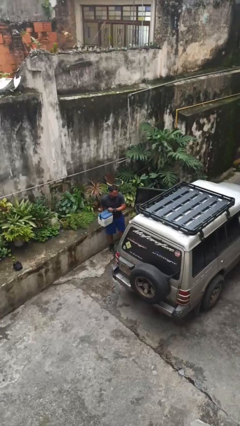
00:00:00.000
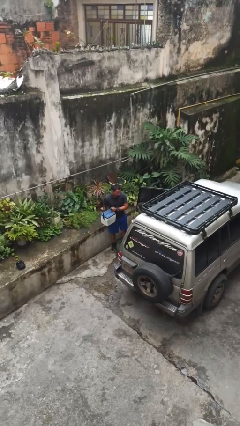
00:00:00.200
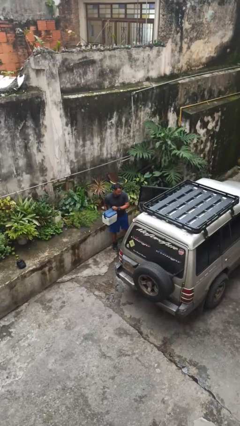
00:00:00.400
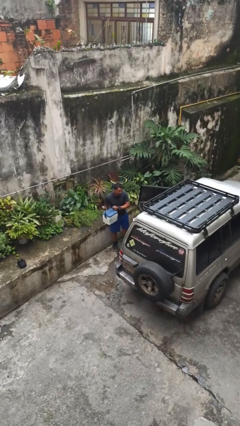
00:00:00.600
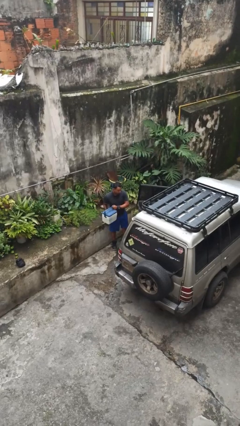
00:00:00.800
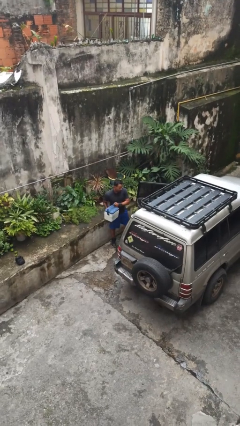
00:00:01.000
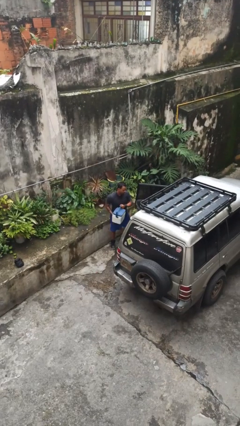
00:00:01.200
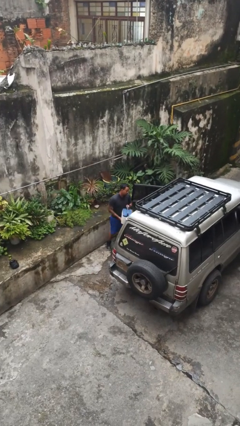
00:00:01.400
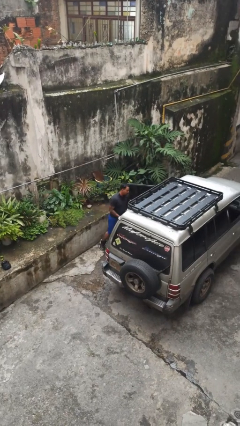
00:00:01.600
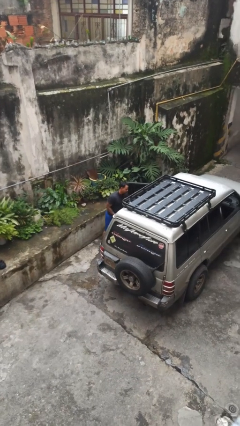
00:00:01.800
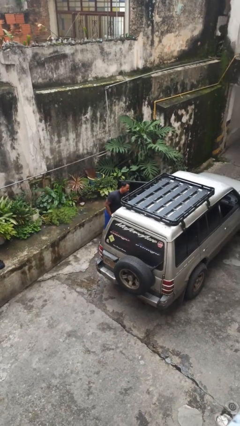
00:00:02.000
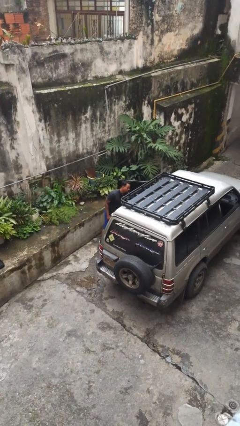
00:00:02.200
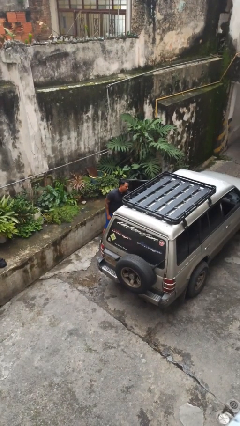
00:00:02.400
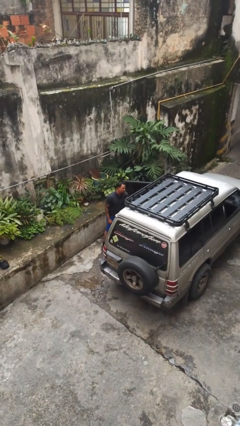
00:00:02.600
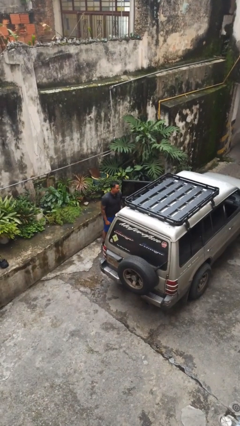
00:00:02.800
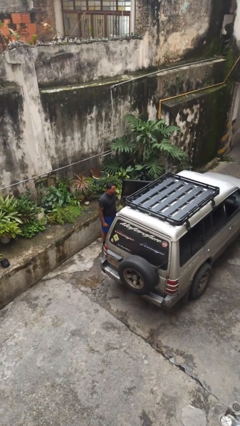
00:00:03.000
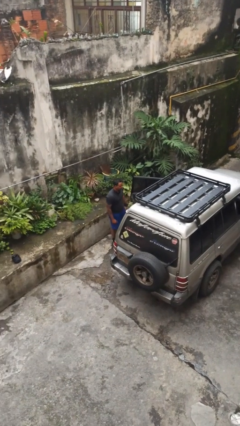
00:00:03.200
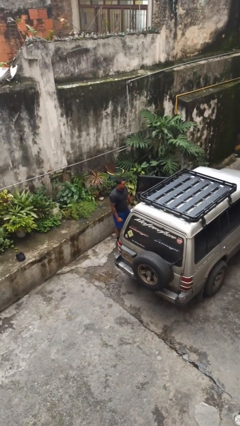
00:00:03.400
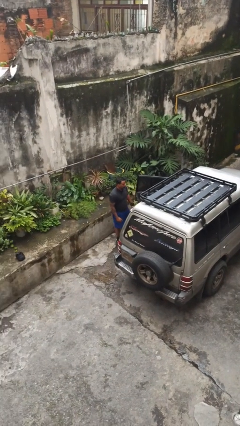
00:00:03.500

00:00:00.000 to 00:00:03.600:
person loads car

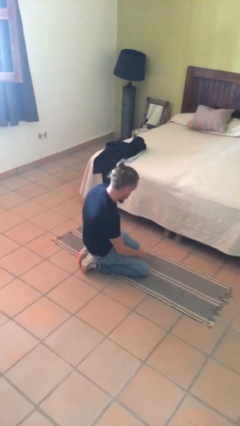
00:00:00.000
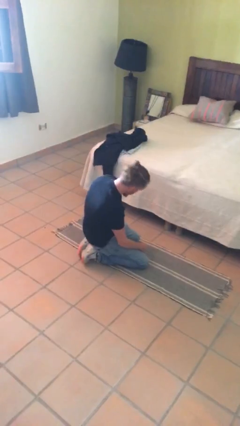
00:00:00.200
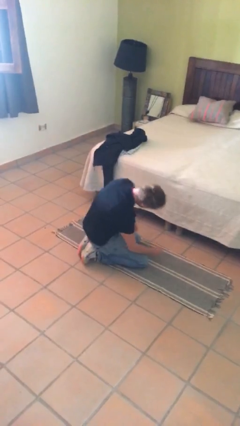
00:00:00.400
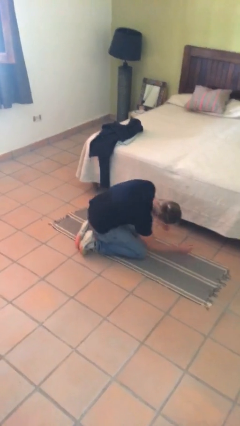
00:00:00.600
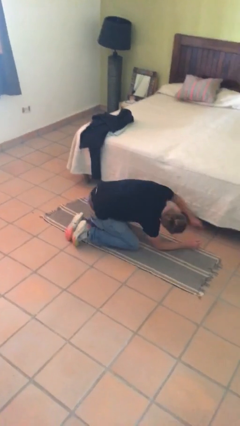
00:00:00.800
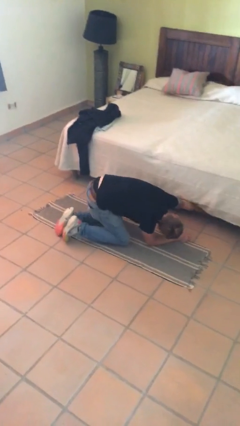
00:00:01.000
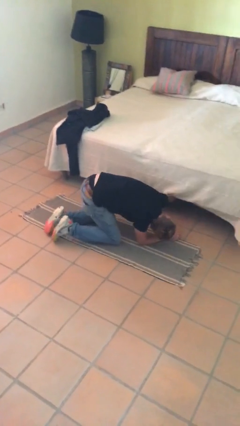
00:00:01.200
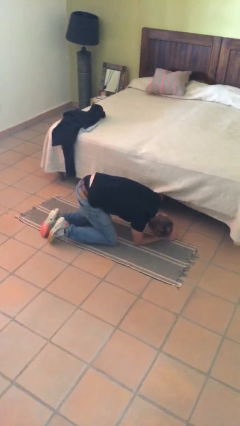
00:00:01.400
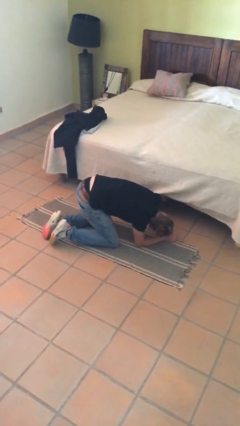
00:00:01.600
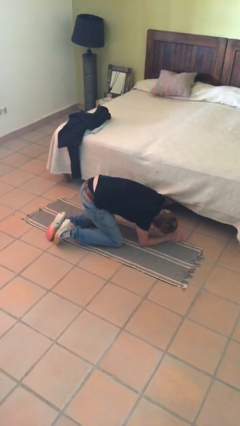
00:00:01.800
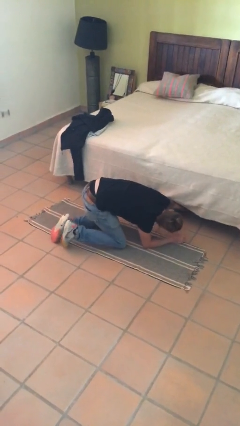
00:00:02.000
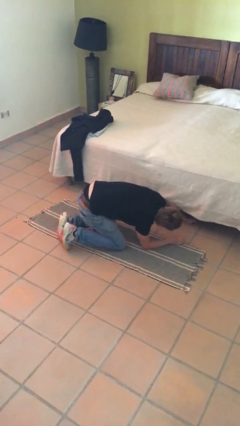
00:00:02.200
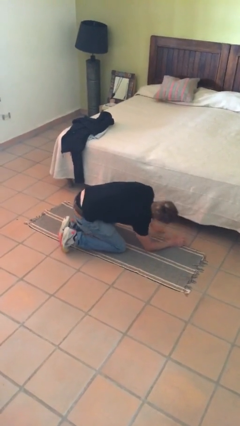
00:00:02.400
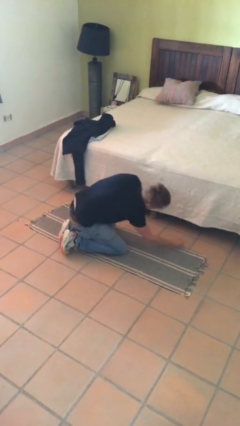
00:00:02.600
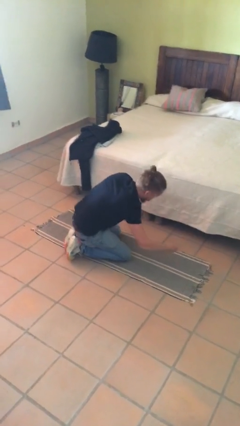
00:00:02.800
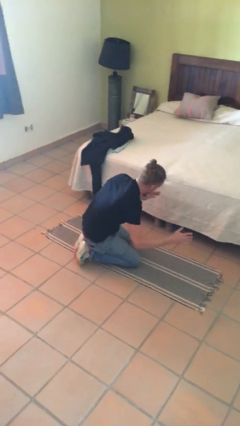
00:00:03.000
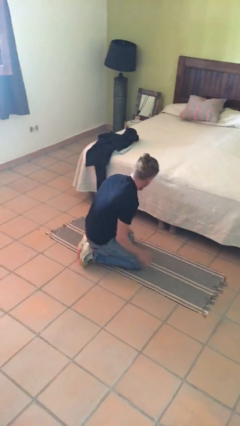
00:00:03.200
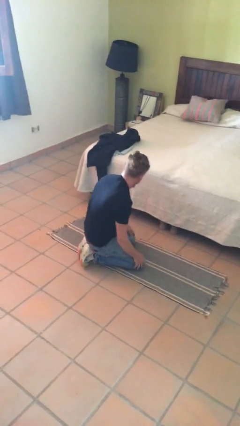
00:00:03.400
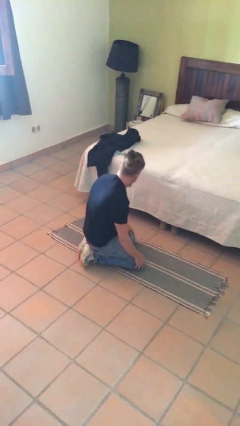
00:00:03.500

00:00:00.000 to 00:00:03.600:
person searches under bed

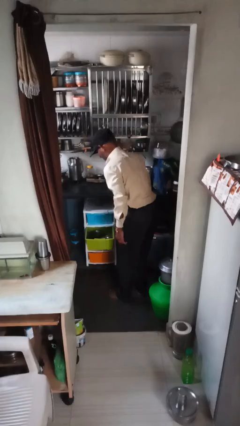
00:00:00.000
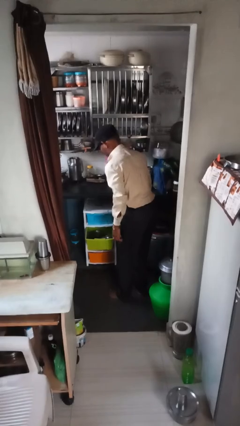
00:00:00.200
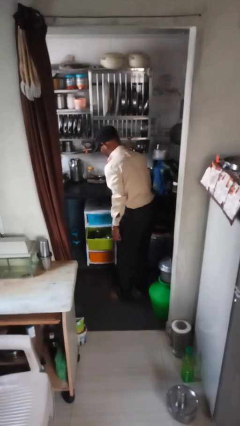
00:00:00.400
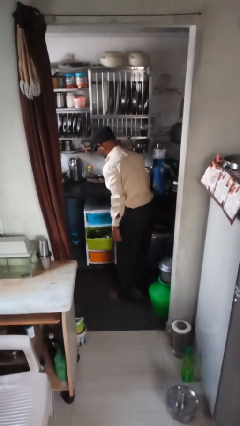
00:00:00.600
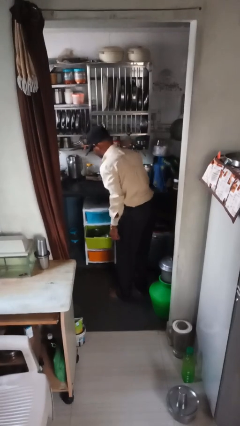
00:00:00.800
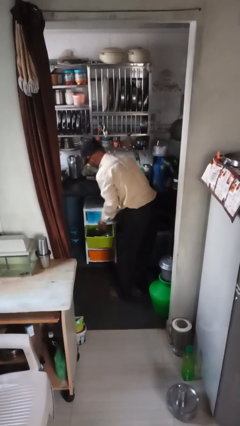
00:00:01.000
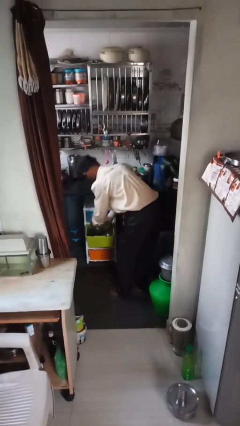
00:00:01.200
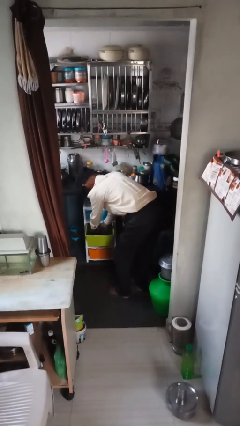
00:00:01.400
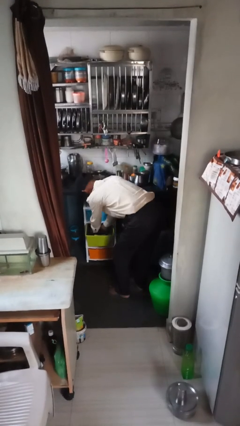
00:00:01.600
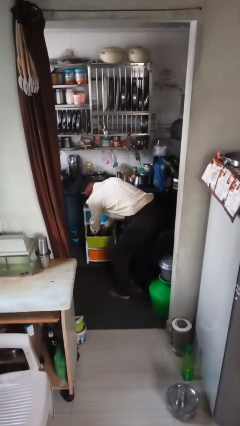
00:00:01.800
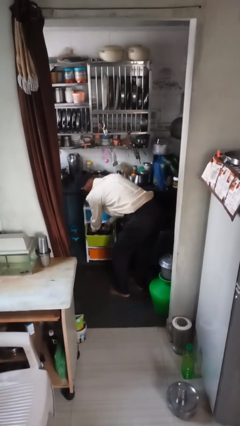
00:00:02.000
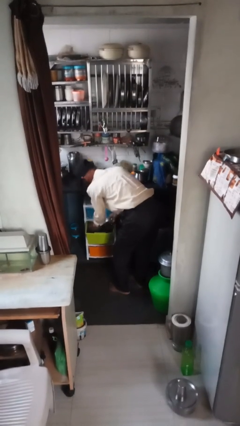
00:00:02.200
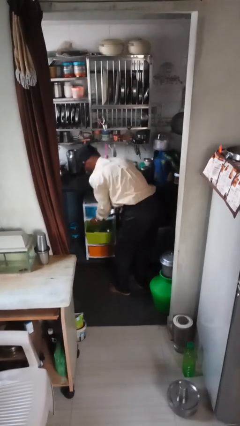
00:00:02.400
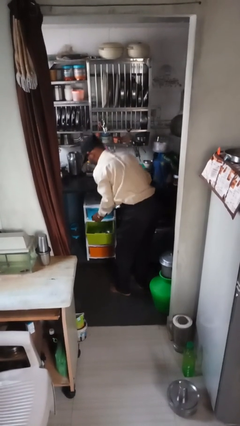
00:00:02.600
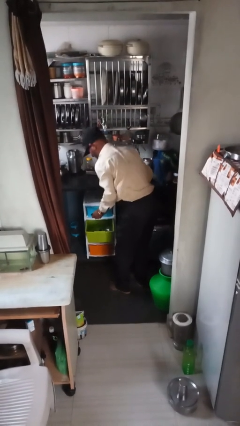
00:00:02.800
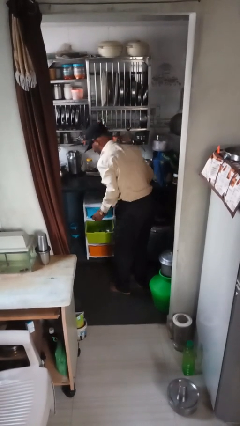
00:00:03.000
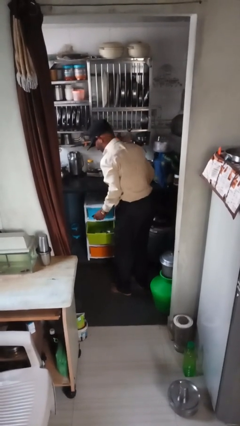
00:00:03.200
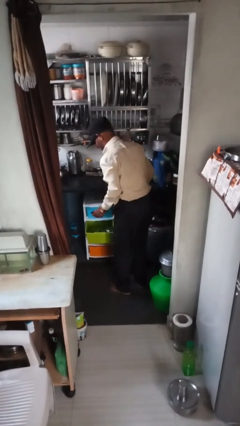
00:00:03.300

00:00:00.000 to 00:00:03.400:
person takes object from kitchen drawer

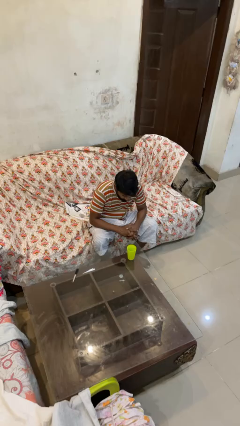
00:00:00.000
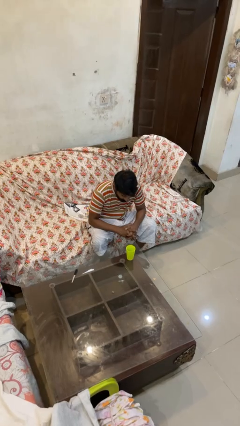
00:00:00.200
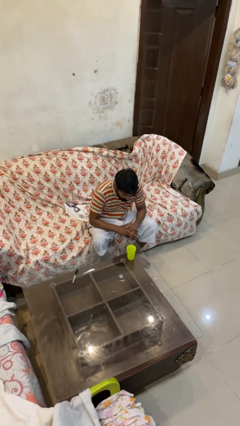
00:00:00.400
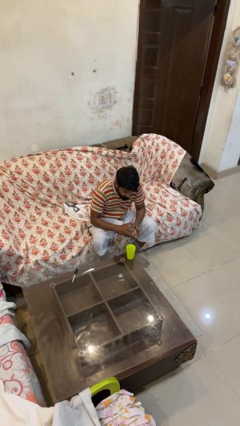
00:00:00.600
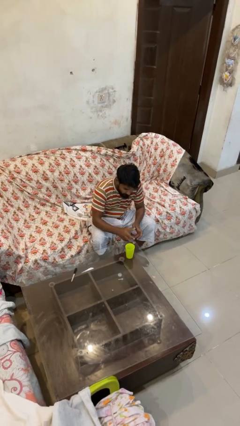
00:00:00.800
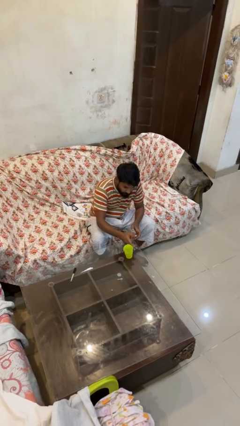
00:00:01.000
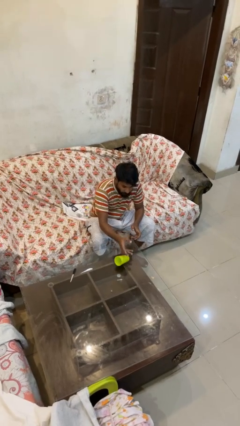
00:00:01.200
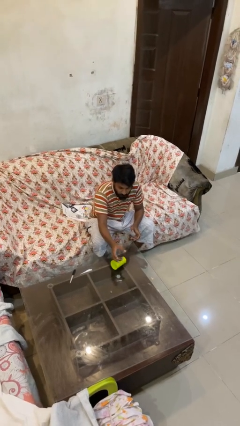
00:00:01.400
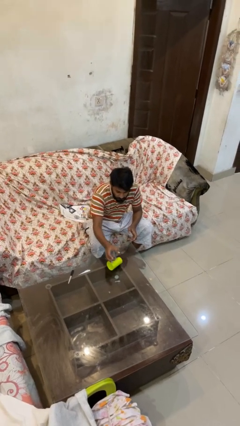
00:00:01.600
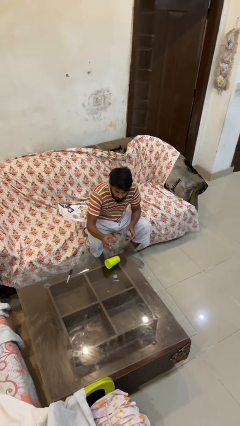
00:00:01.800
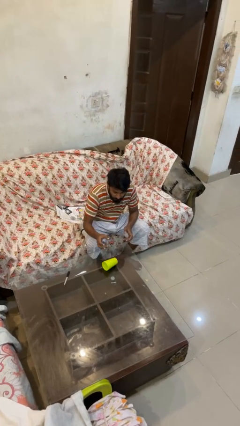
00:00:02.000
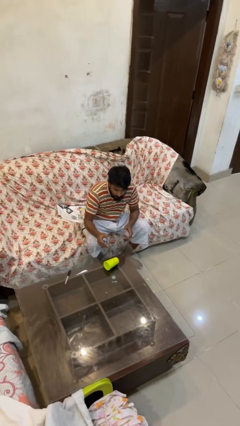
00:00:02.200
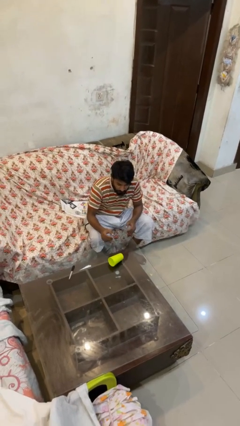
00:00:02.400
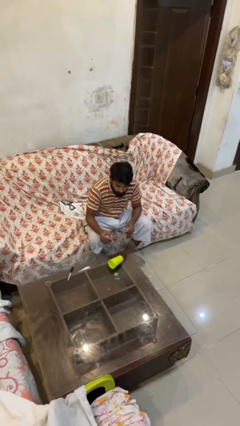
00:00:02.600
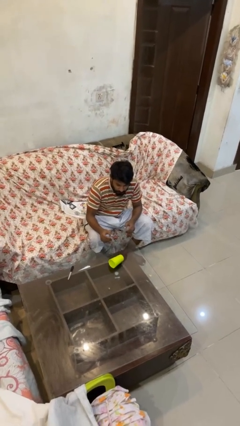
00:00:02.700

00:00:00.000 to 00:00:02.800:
person knocks over glass

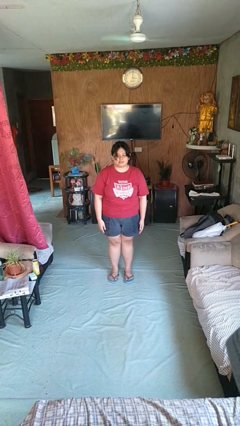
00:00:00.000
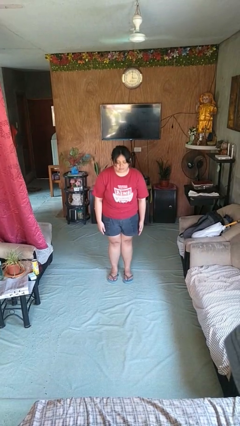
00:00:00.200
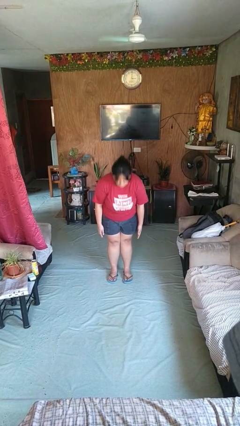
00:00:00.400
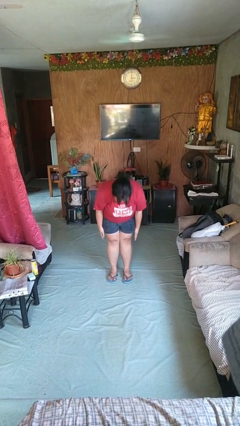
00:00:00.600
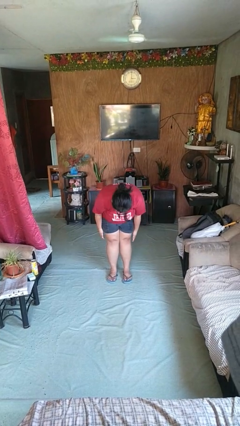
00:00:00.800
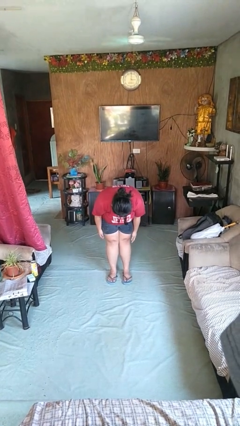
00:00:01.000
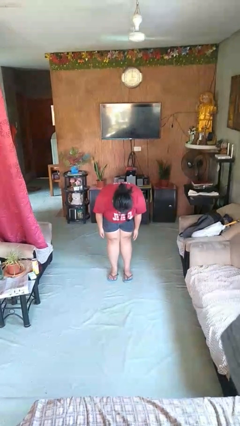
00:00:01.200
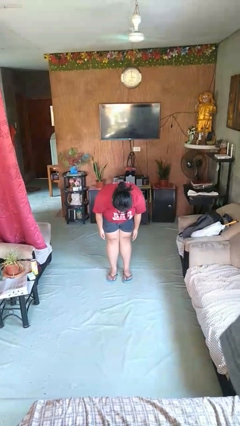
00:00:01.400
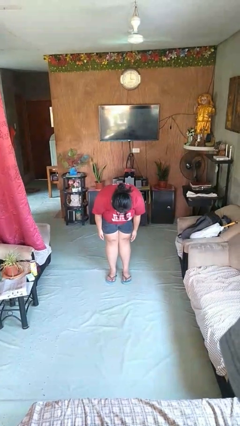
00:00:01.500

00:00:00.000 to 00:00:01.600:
person bows

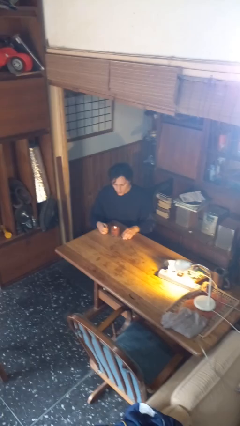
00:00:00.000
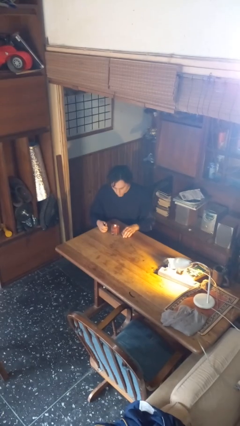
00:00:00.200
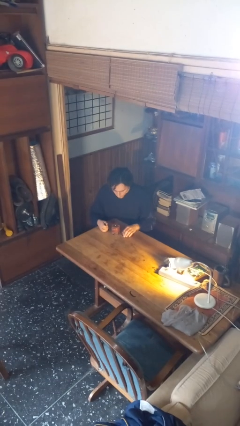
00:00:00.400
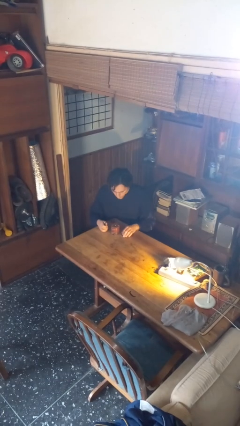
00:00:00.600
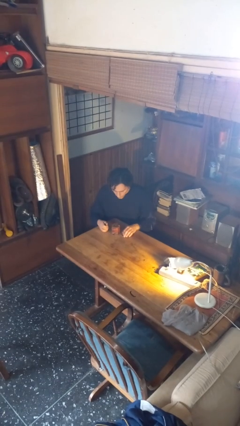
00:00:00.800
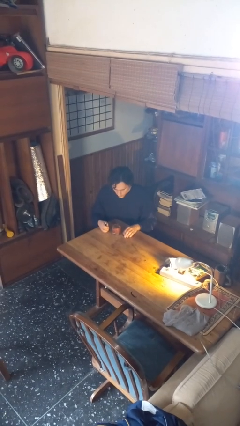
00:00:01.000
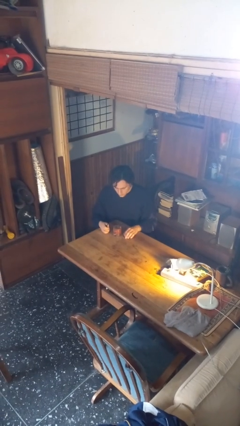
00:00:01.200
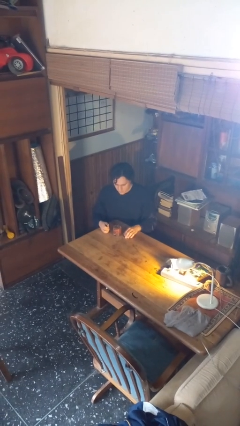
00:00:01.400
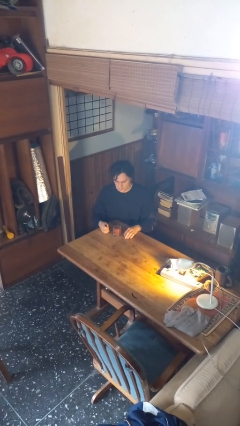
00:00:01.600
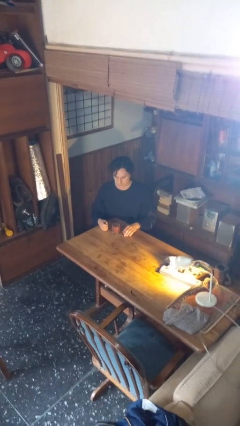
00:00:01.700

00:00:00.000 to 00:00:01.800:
person extinguishes candle

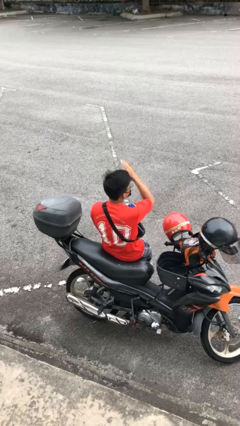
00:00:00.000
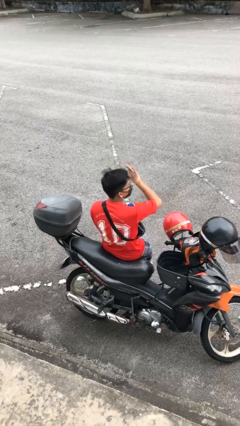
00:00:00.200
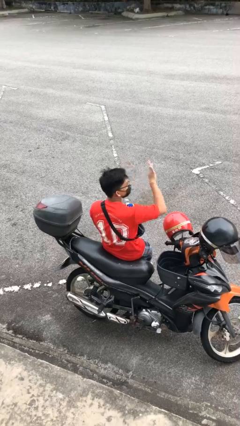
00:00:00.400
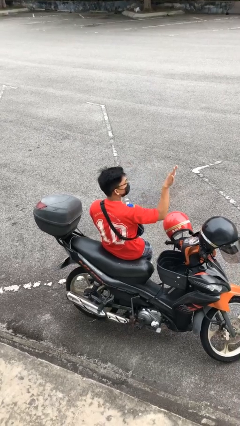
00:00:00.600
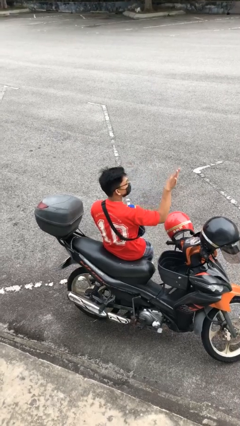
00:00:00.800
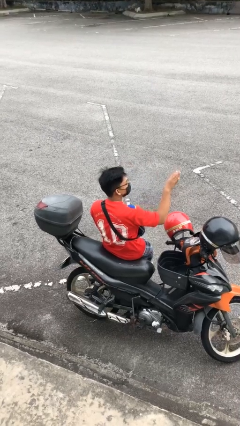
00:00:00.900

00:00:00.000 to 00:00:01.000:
person gestures swipe right
